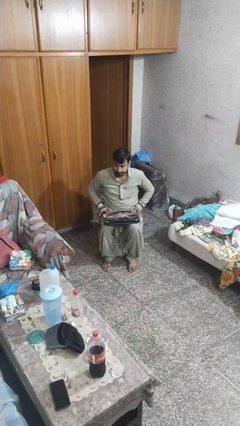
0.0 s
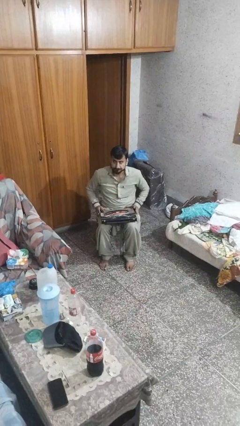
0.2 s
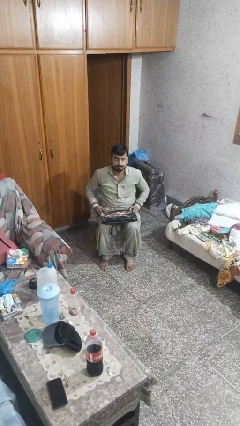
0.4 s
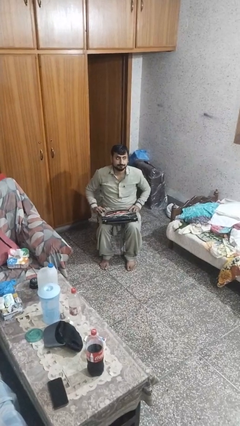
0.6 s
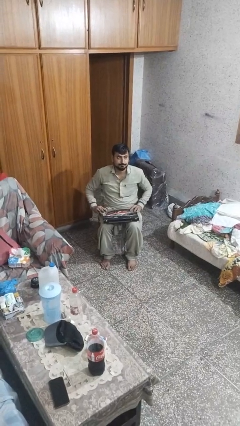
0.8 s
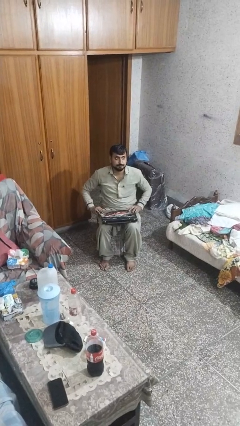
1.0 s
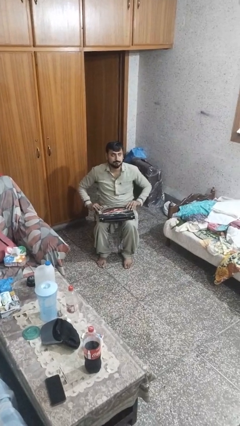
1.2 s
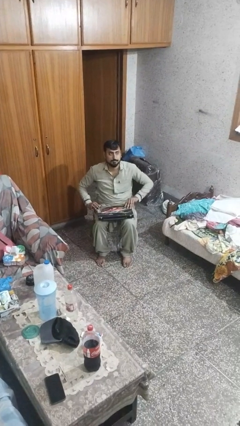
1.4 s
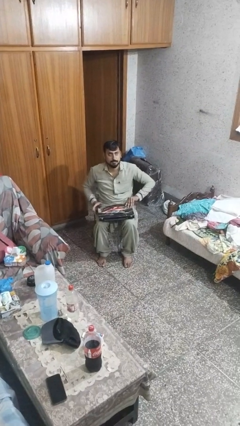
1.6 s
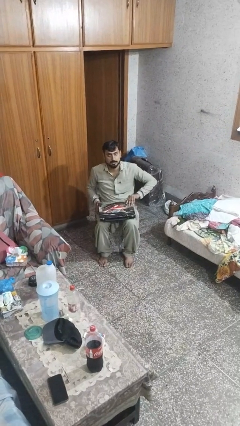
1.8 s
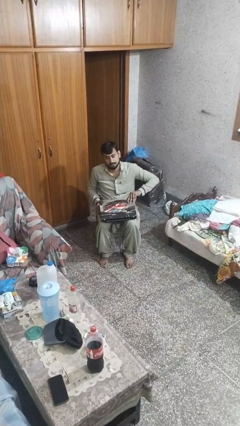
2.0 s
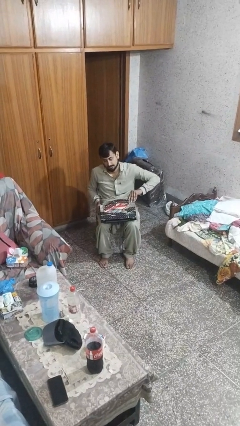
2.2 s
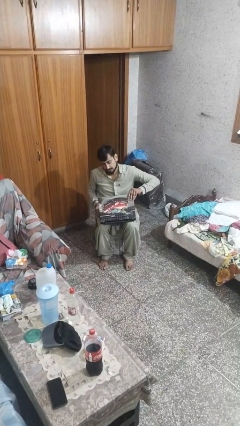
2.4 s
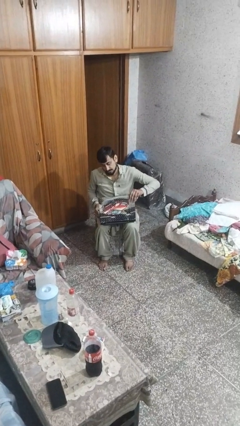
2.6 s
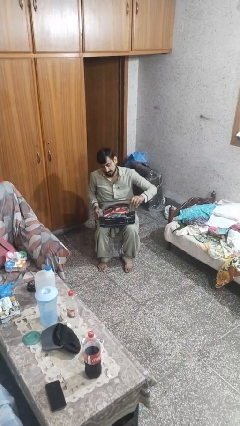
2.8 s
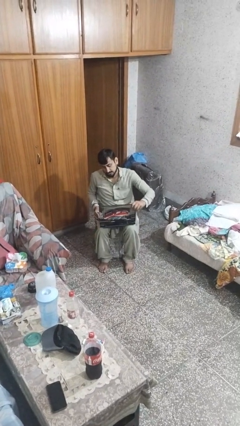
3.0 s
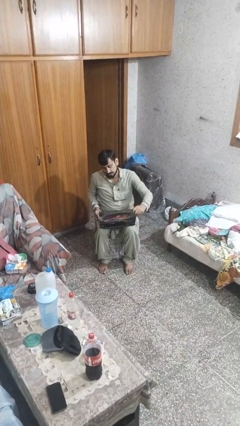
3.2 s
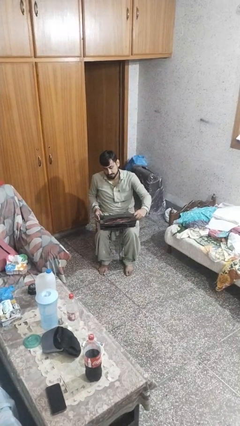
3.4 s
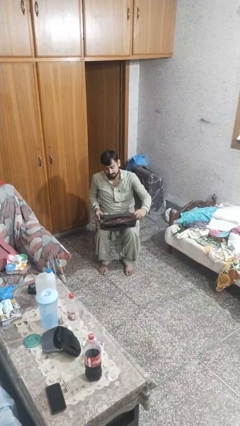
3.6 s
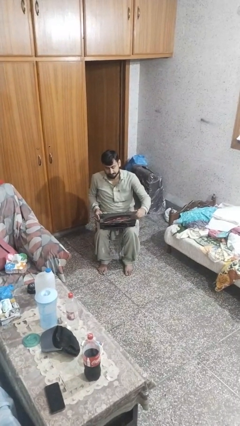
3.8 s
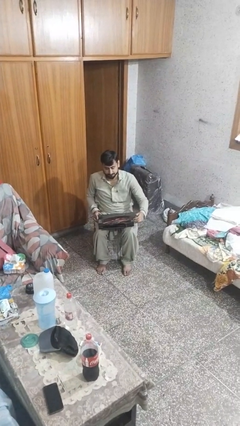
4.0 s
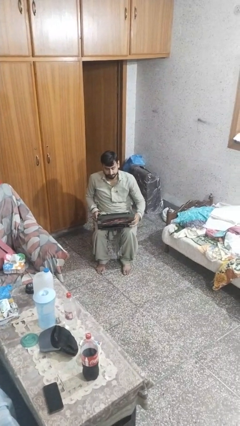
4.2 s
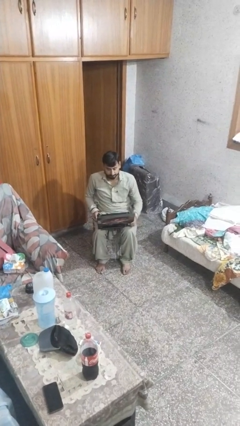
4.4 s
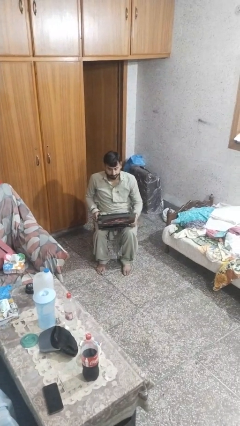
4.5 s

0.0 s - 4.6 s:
person opens laptop

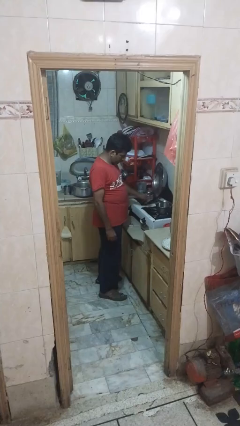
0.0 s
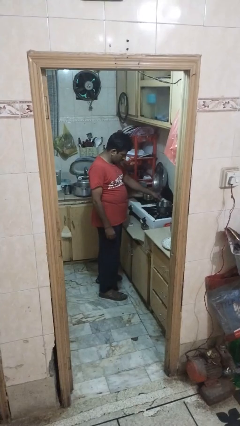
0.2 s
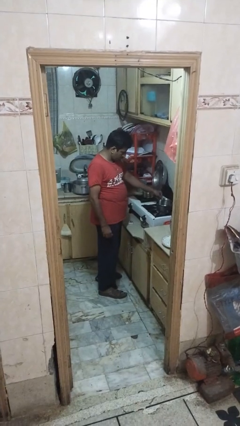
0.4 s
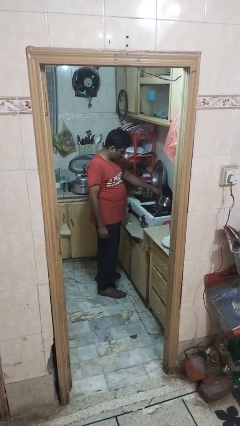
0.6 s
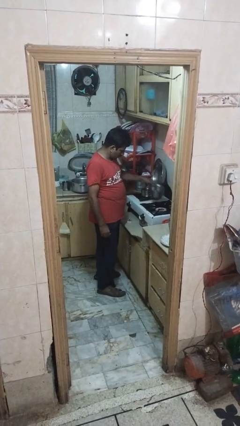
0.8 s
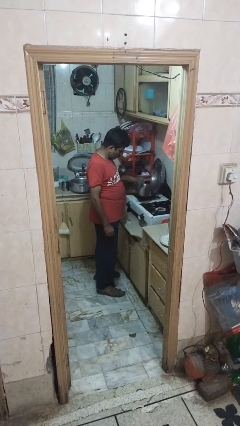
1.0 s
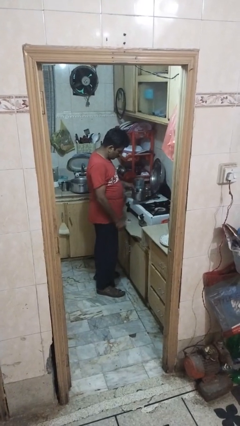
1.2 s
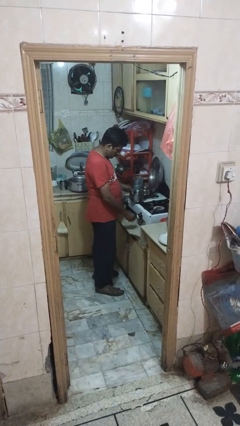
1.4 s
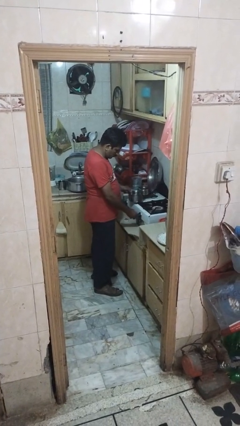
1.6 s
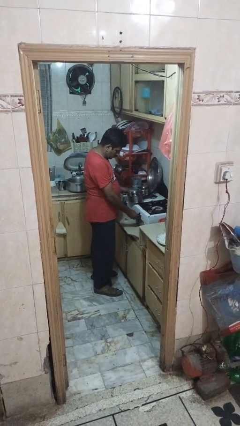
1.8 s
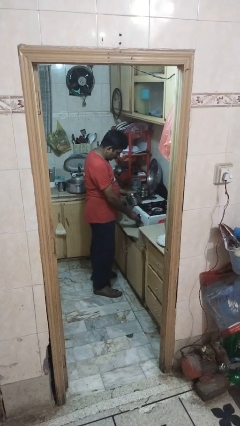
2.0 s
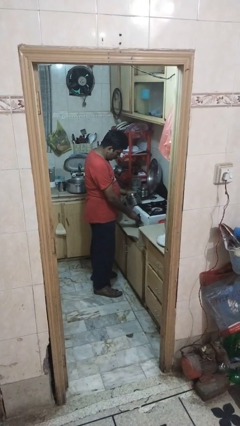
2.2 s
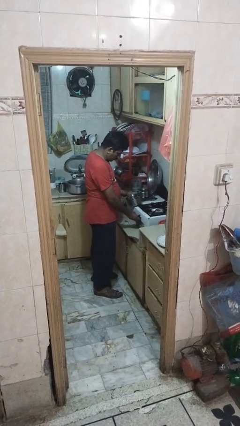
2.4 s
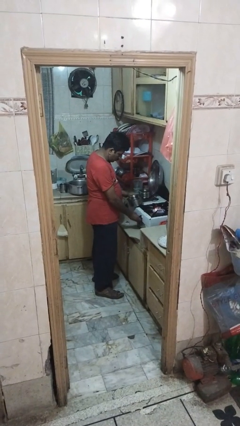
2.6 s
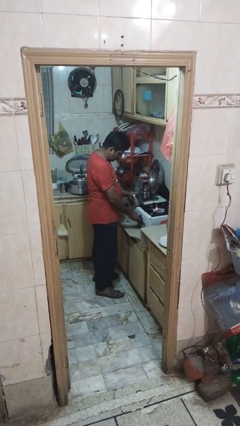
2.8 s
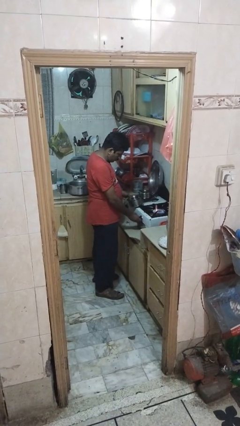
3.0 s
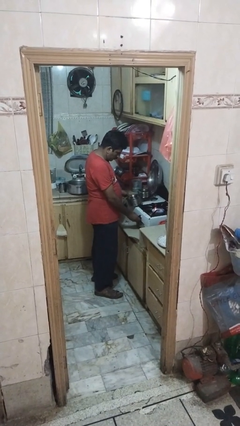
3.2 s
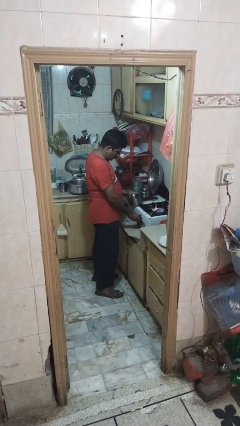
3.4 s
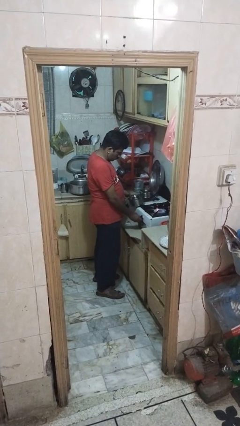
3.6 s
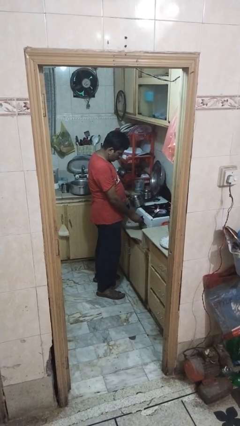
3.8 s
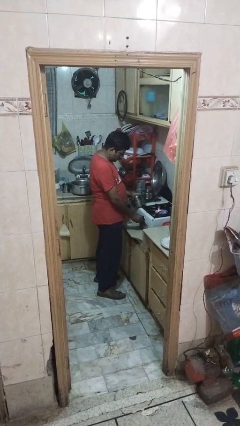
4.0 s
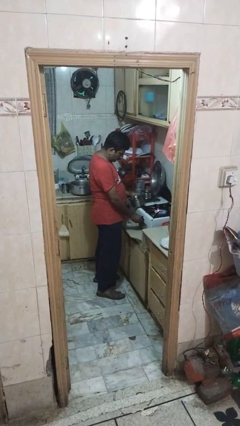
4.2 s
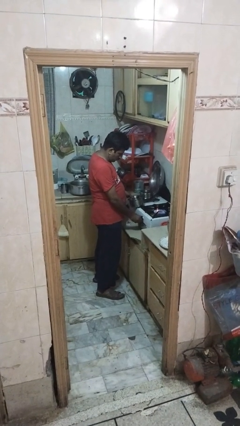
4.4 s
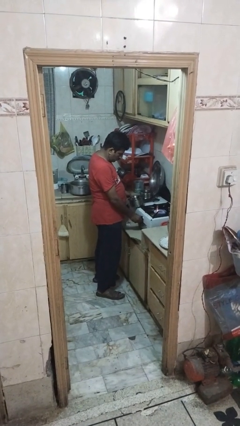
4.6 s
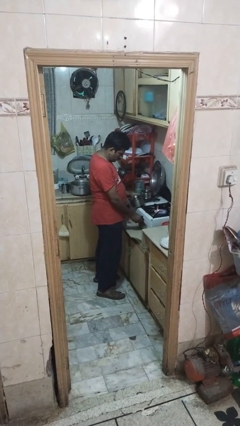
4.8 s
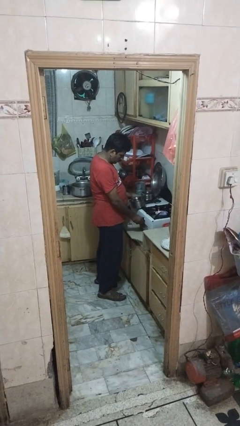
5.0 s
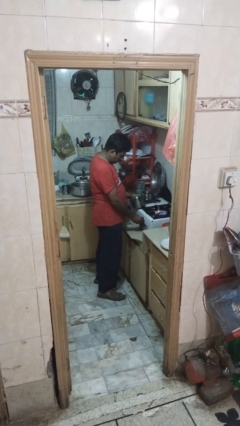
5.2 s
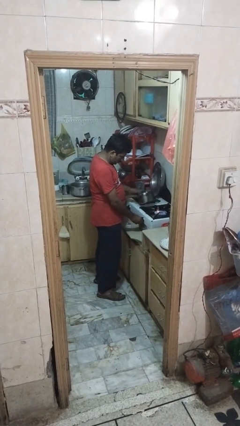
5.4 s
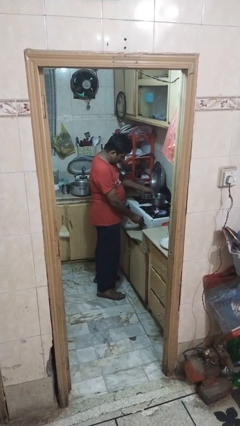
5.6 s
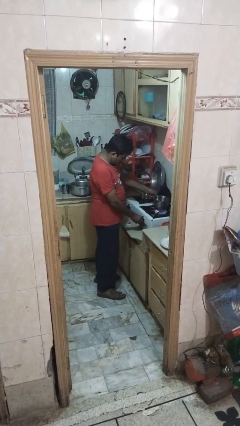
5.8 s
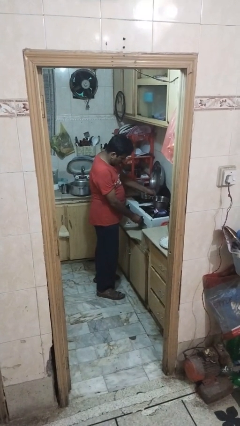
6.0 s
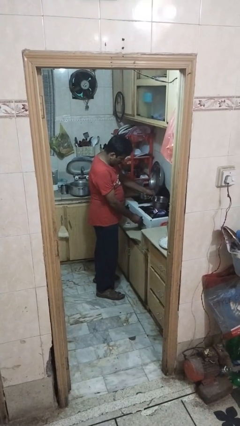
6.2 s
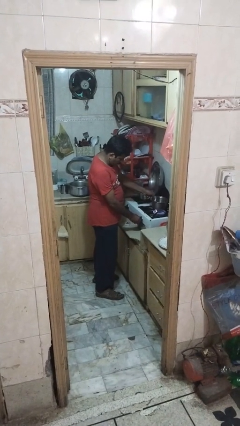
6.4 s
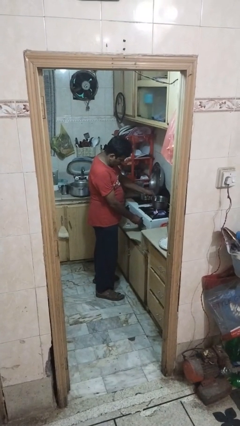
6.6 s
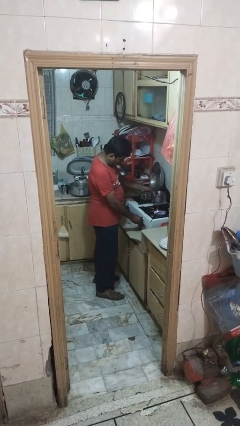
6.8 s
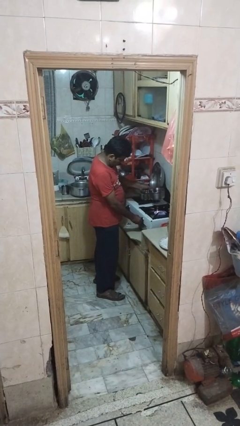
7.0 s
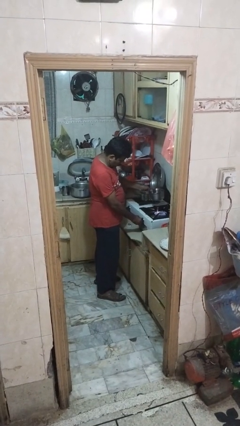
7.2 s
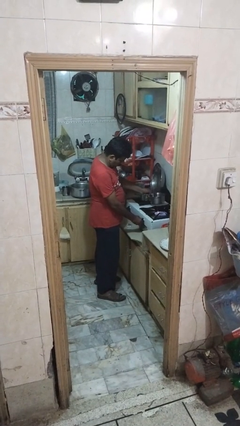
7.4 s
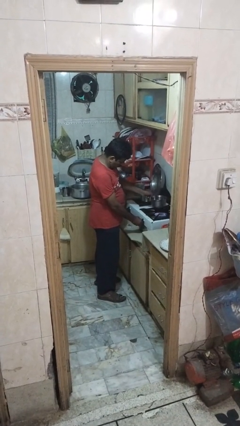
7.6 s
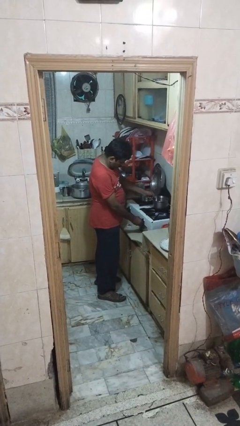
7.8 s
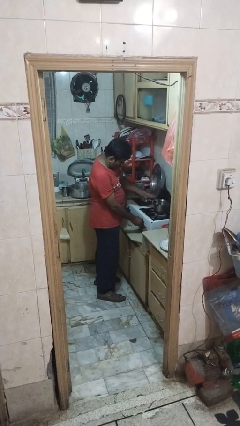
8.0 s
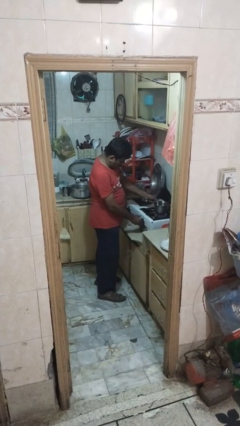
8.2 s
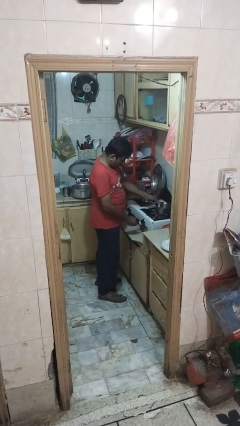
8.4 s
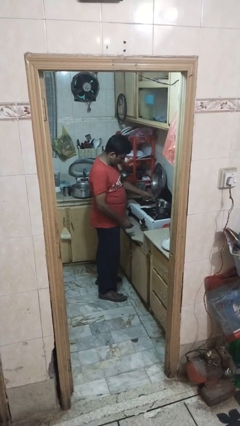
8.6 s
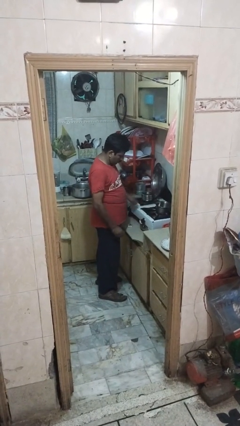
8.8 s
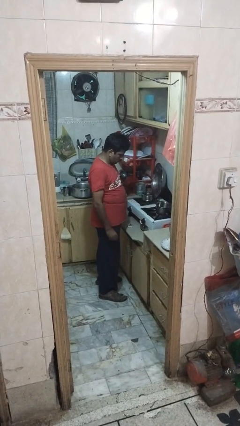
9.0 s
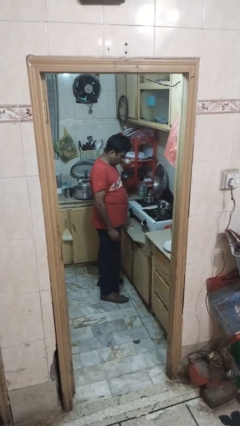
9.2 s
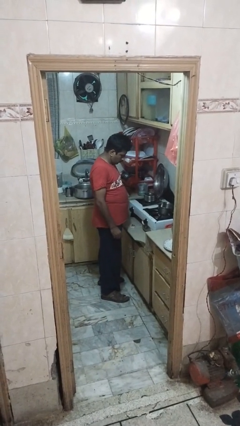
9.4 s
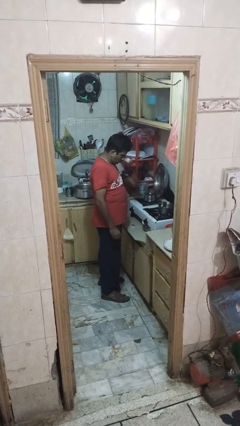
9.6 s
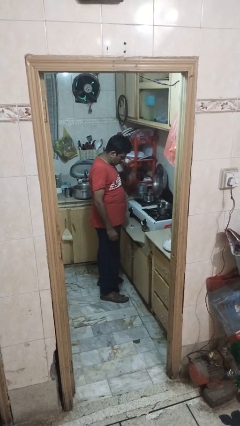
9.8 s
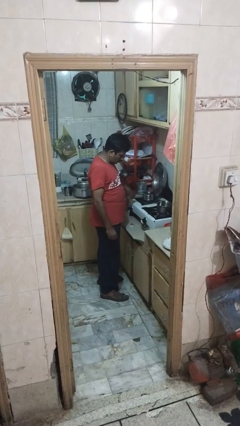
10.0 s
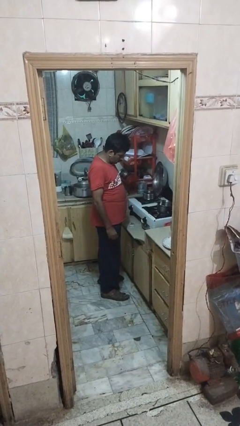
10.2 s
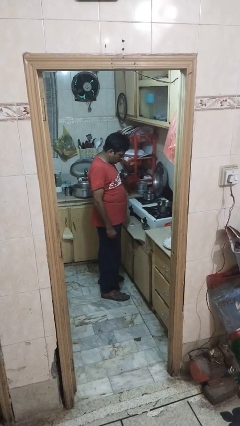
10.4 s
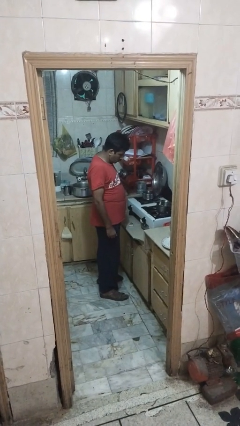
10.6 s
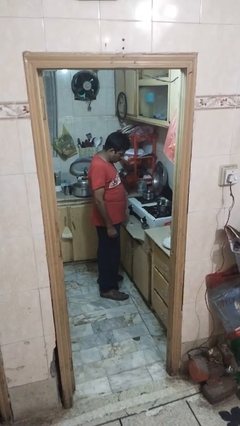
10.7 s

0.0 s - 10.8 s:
person burns hand

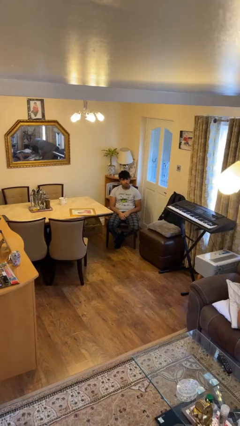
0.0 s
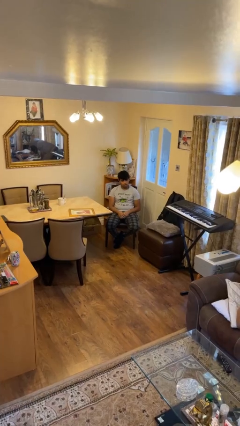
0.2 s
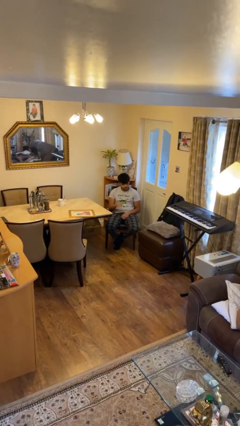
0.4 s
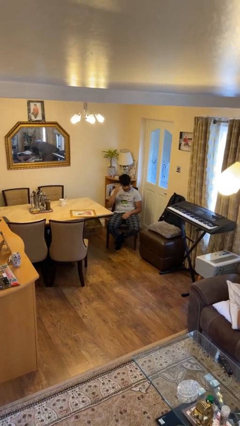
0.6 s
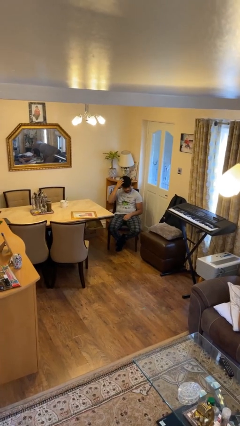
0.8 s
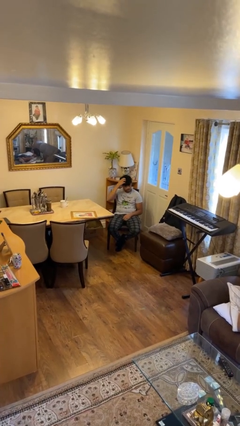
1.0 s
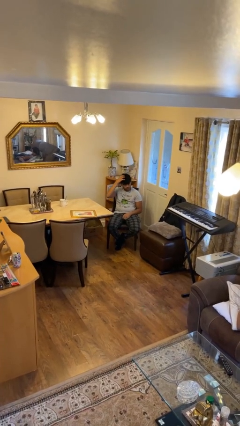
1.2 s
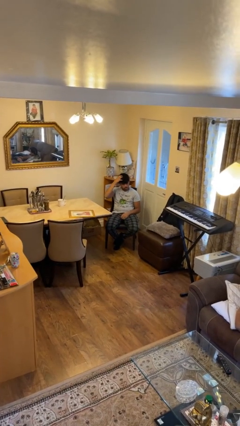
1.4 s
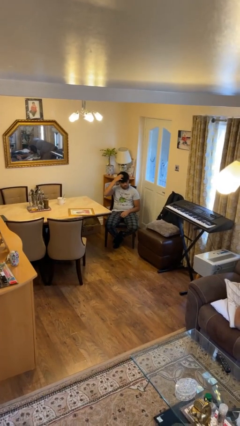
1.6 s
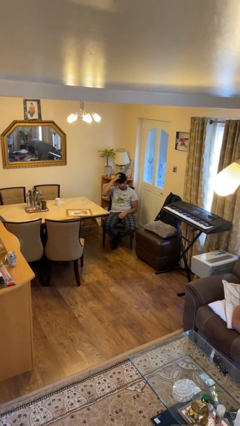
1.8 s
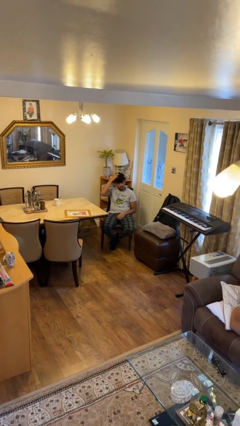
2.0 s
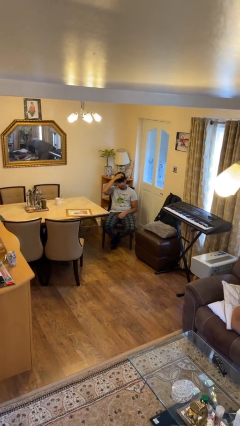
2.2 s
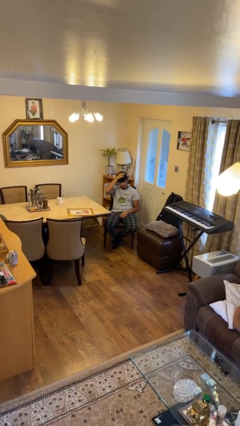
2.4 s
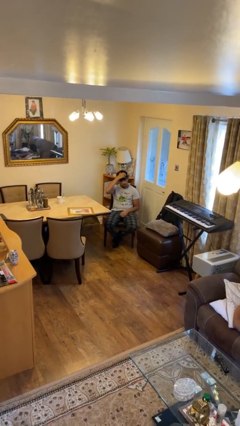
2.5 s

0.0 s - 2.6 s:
person strokes hair

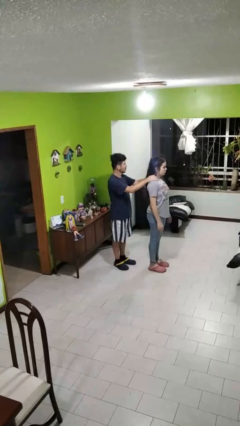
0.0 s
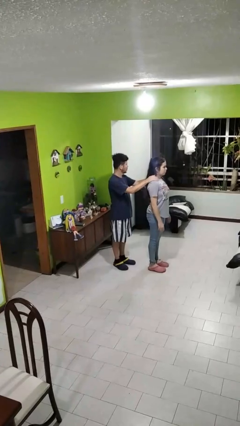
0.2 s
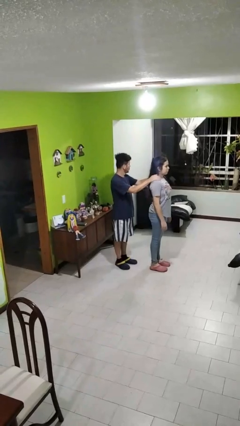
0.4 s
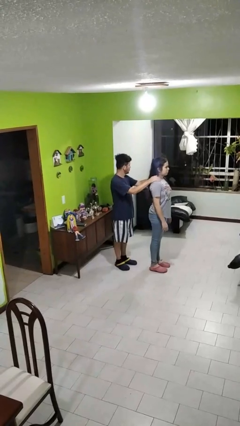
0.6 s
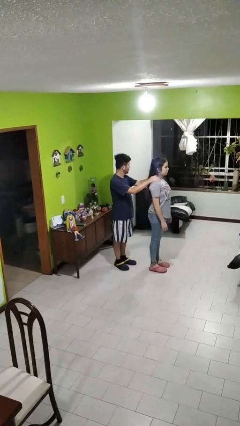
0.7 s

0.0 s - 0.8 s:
person grabs person by shoulder
